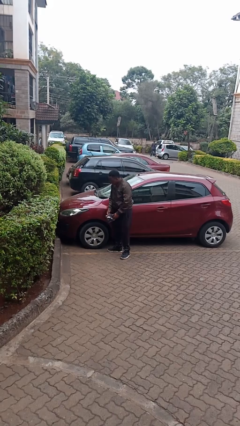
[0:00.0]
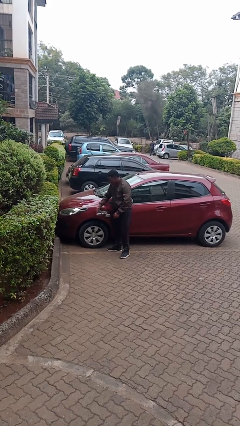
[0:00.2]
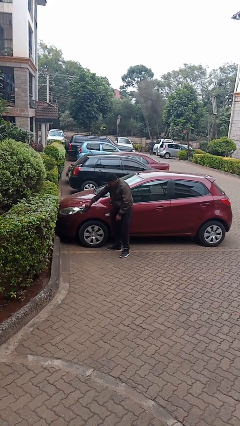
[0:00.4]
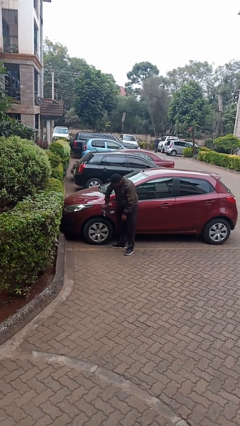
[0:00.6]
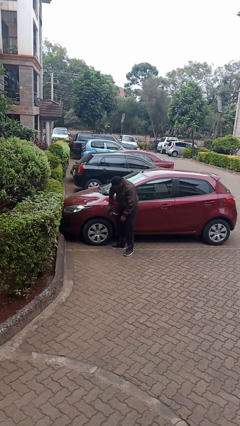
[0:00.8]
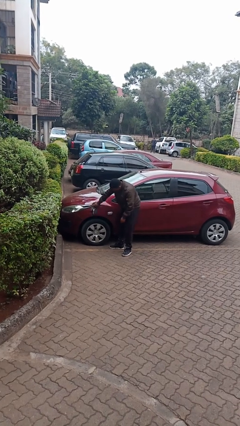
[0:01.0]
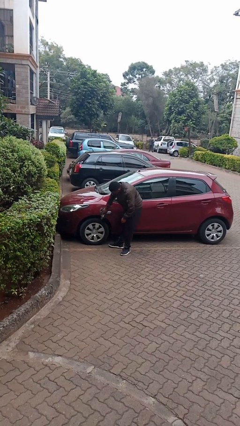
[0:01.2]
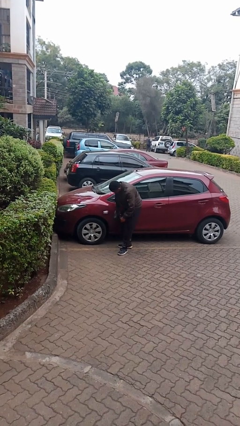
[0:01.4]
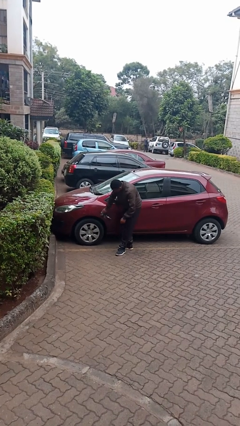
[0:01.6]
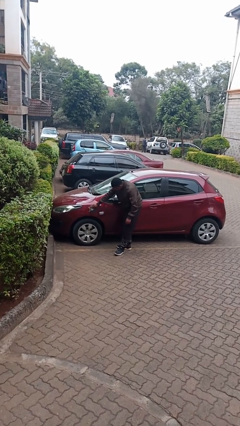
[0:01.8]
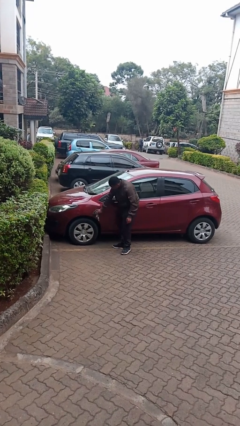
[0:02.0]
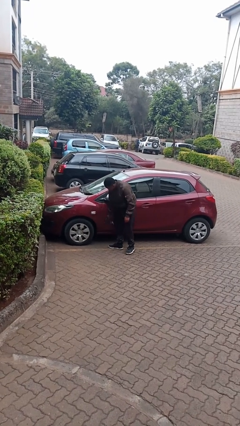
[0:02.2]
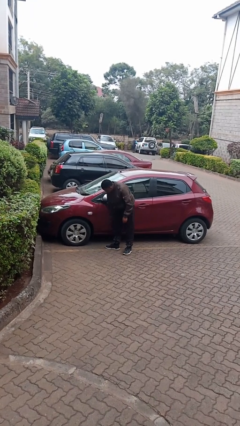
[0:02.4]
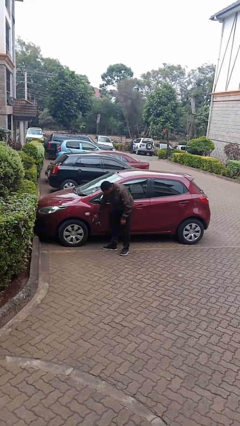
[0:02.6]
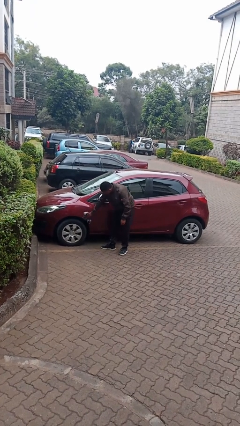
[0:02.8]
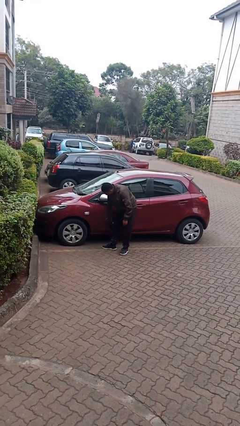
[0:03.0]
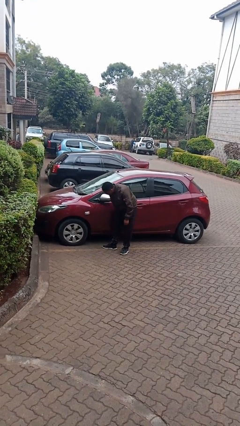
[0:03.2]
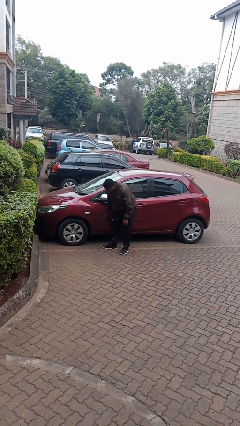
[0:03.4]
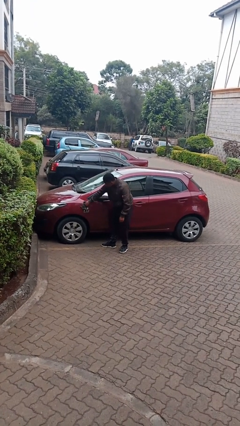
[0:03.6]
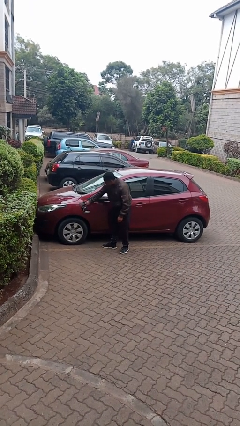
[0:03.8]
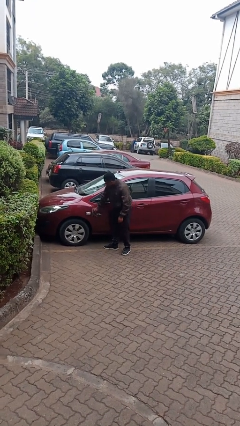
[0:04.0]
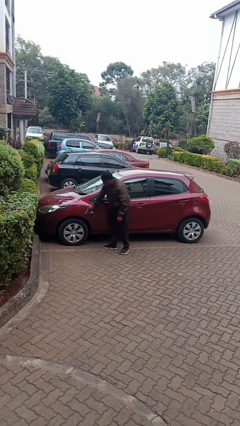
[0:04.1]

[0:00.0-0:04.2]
person polishes car with rag

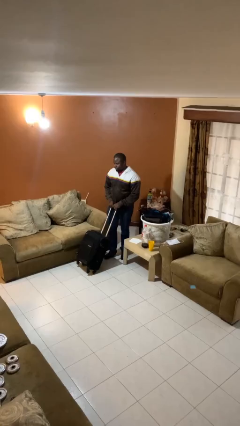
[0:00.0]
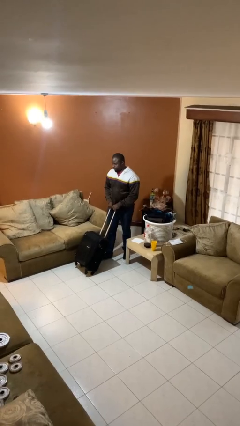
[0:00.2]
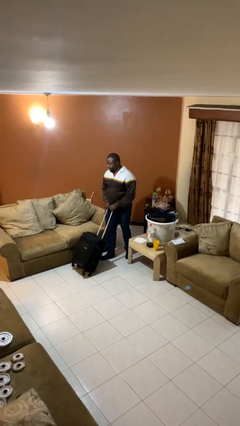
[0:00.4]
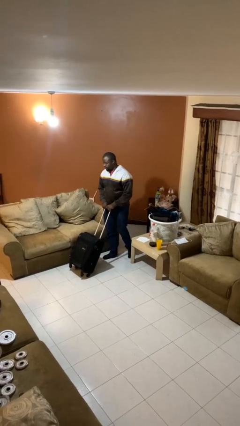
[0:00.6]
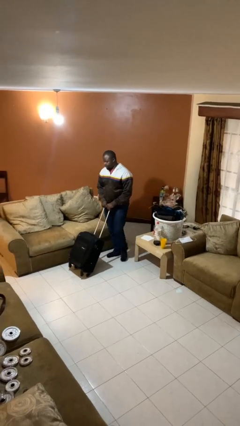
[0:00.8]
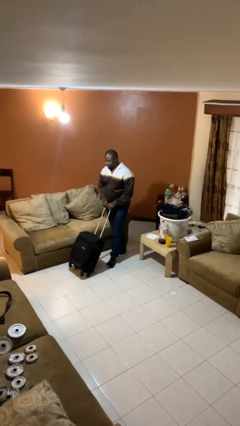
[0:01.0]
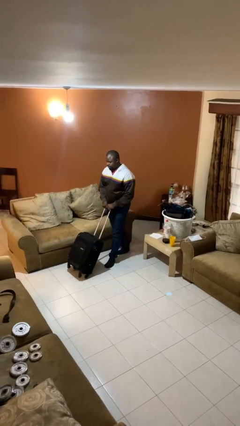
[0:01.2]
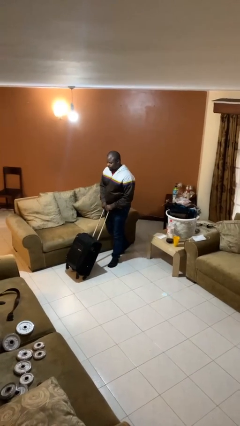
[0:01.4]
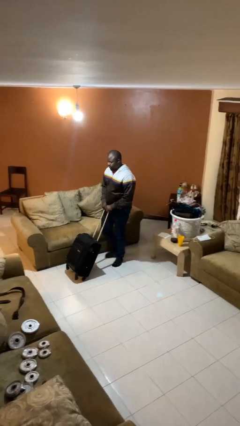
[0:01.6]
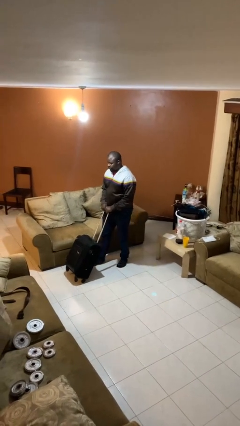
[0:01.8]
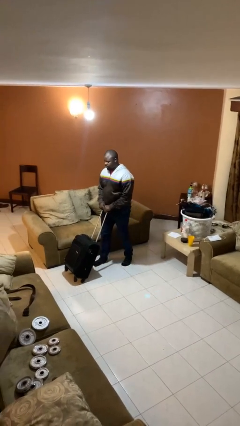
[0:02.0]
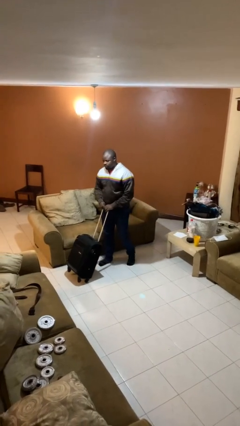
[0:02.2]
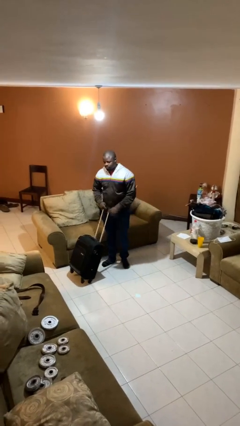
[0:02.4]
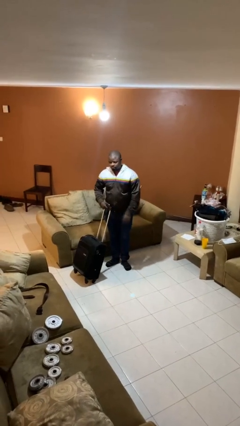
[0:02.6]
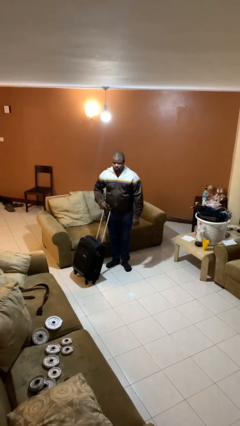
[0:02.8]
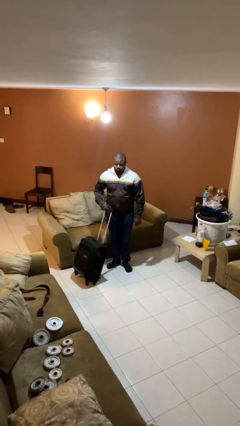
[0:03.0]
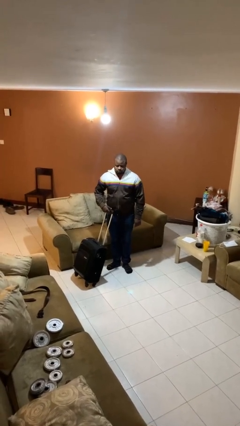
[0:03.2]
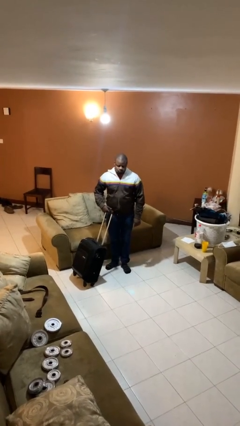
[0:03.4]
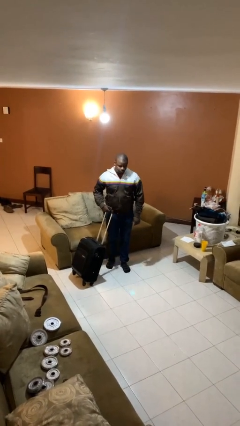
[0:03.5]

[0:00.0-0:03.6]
person pushes wheeled cart

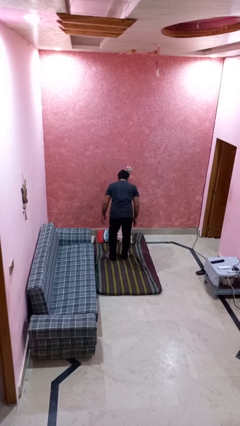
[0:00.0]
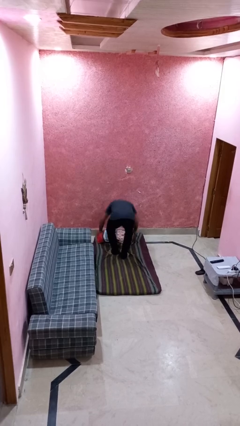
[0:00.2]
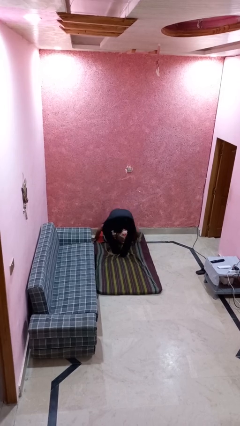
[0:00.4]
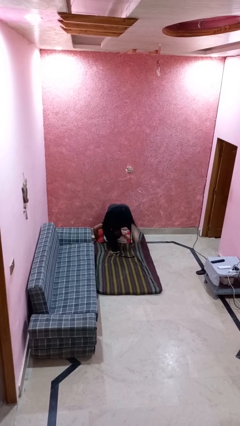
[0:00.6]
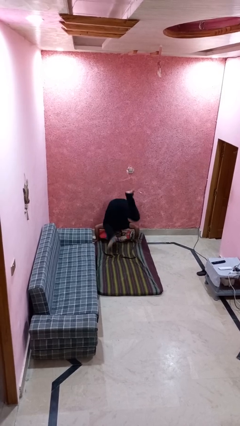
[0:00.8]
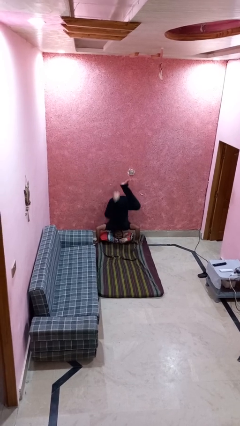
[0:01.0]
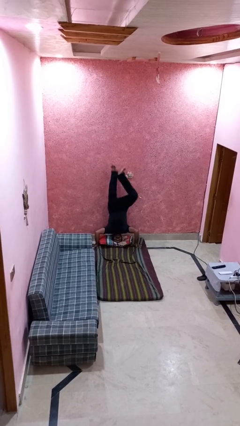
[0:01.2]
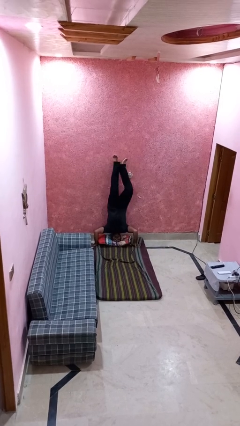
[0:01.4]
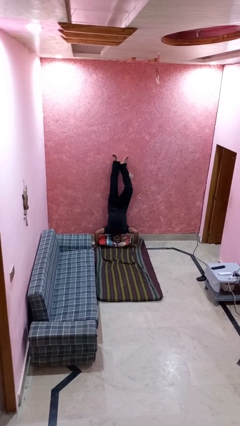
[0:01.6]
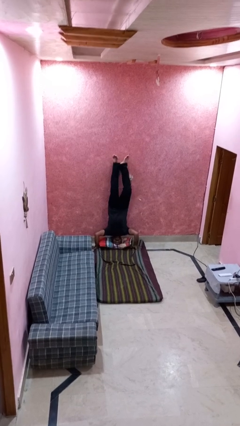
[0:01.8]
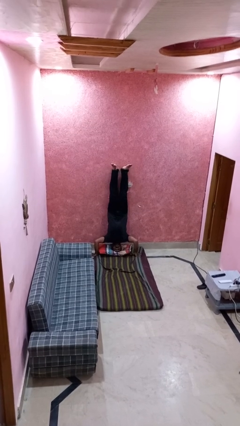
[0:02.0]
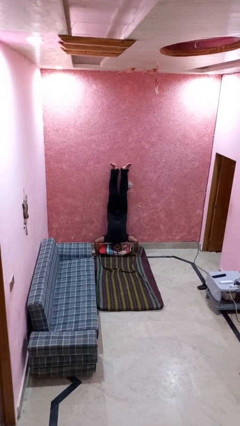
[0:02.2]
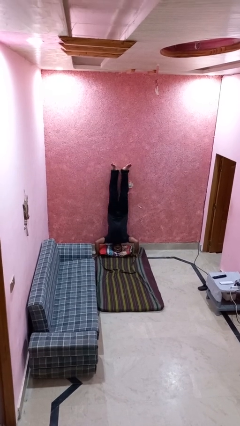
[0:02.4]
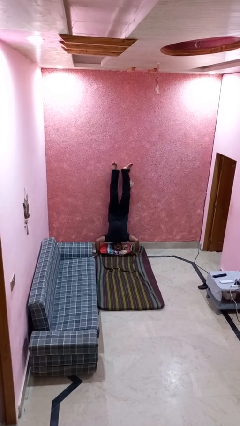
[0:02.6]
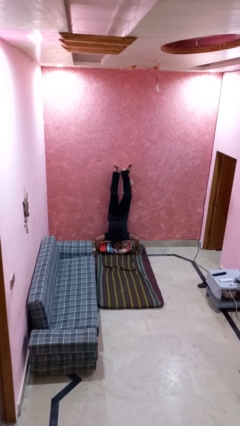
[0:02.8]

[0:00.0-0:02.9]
person handstand

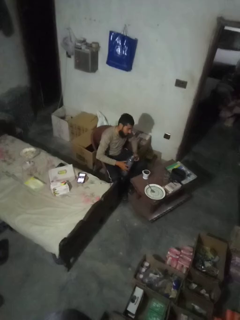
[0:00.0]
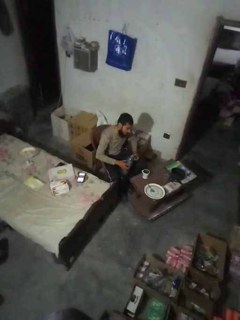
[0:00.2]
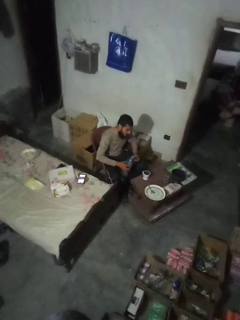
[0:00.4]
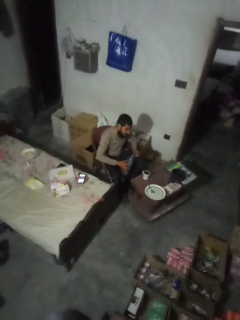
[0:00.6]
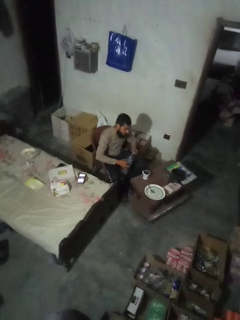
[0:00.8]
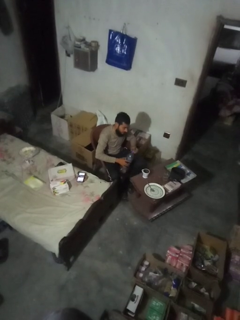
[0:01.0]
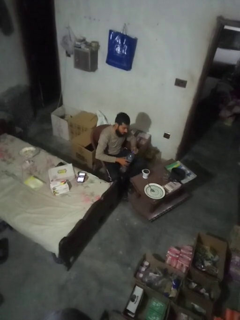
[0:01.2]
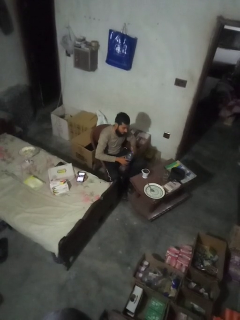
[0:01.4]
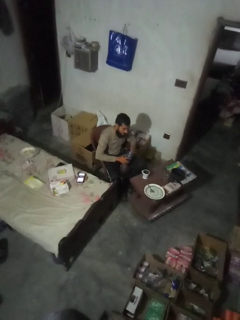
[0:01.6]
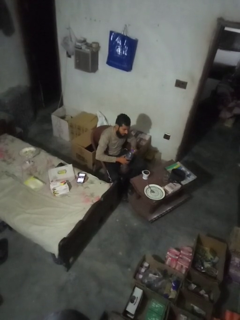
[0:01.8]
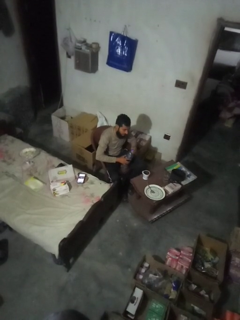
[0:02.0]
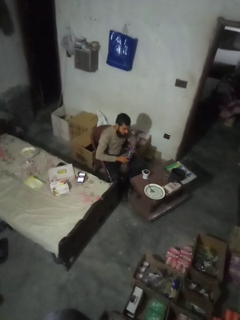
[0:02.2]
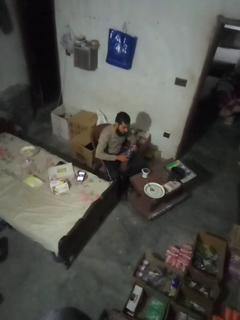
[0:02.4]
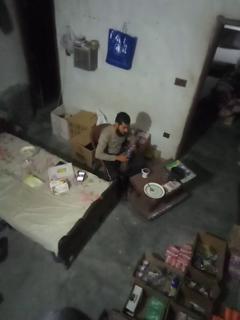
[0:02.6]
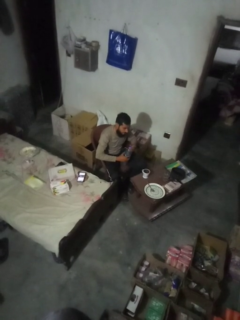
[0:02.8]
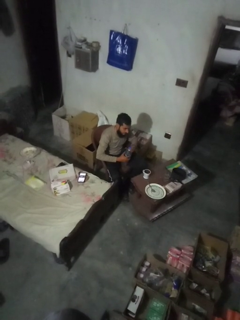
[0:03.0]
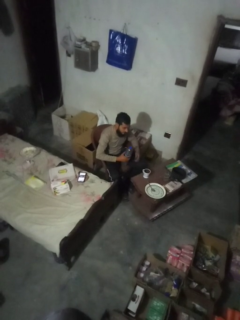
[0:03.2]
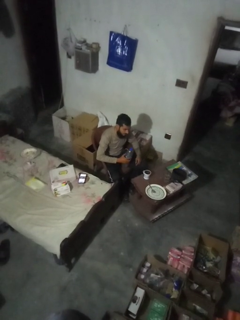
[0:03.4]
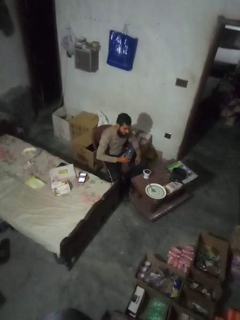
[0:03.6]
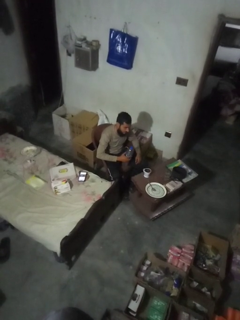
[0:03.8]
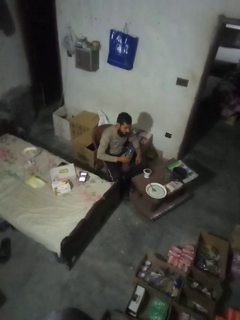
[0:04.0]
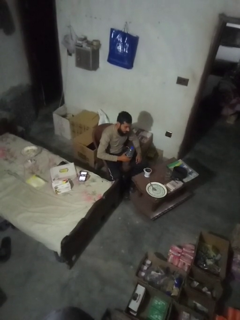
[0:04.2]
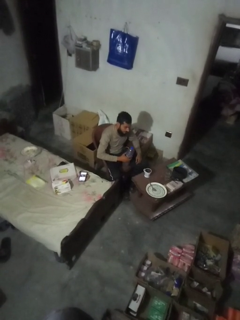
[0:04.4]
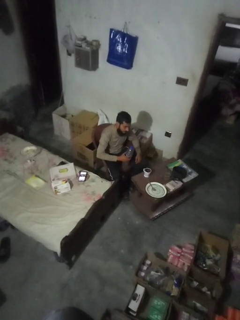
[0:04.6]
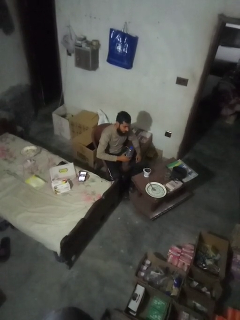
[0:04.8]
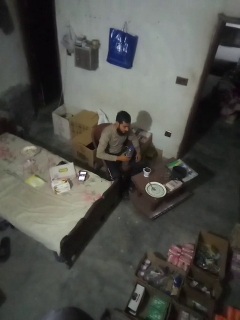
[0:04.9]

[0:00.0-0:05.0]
person screws lid to bottle

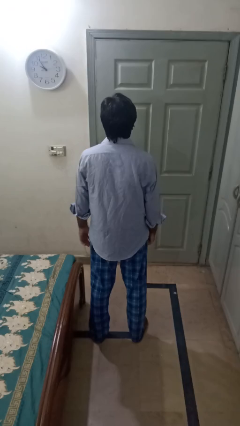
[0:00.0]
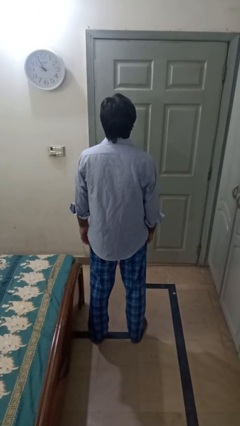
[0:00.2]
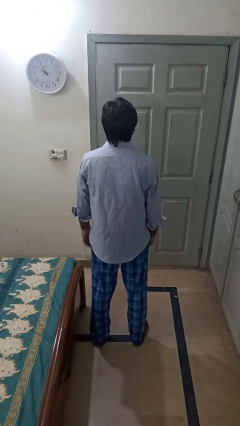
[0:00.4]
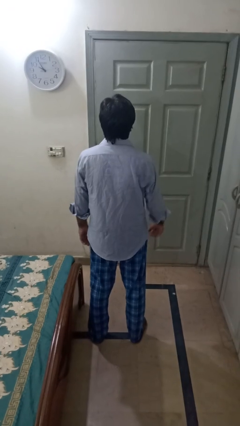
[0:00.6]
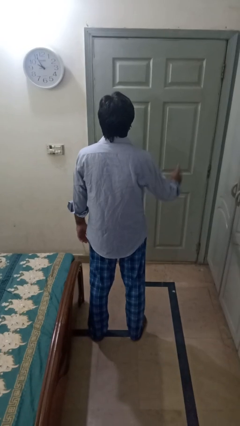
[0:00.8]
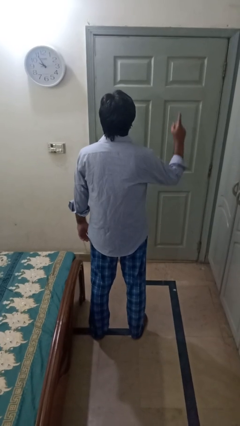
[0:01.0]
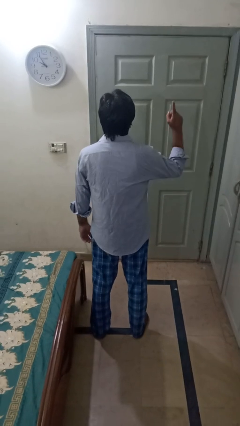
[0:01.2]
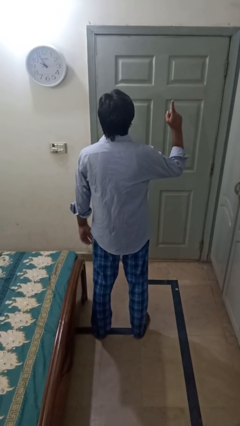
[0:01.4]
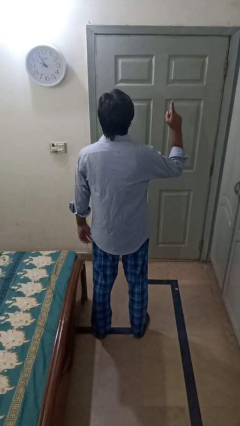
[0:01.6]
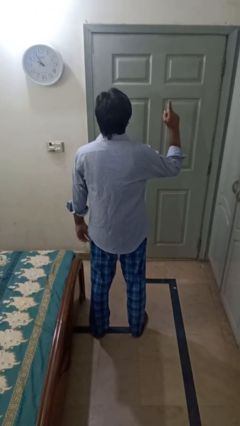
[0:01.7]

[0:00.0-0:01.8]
person gestures number one

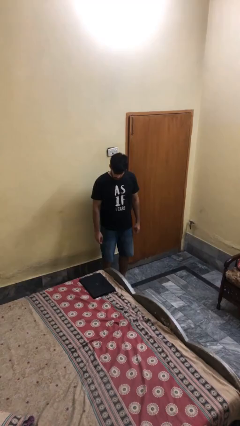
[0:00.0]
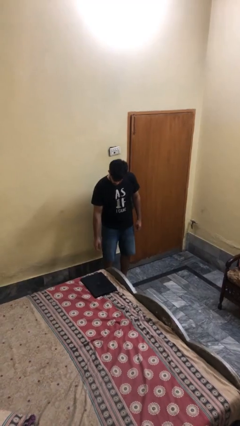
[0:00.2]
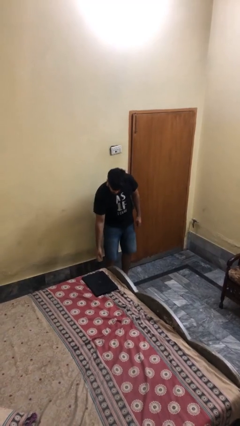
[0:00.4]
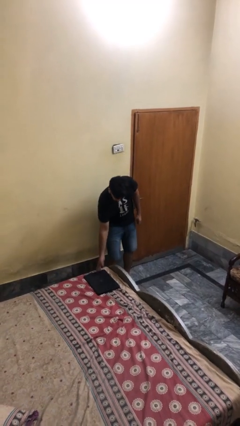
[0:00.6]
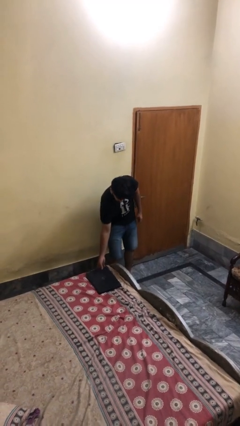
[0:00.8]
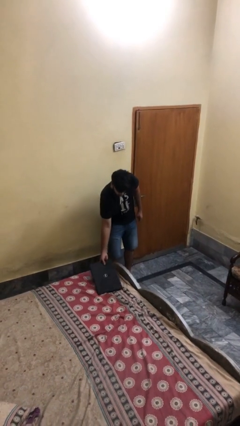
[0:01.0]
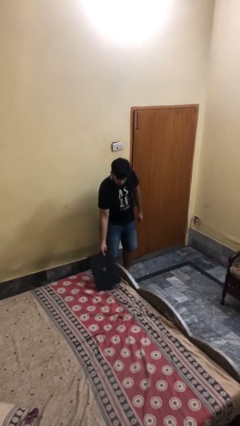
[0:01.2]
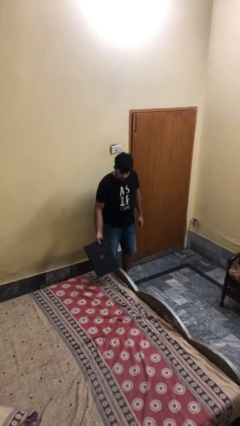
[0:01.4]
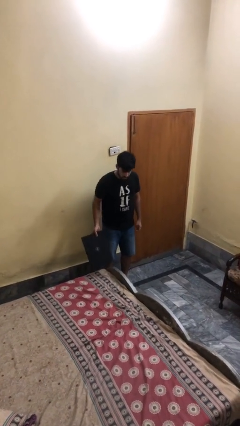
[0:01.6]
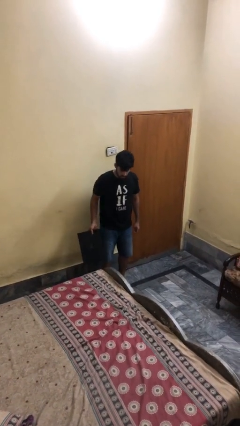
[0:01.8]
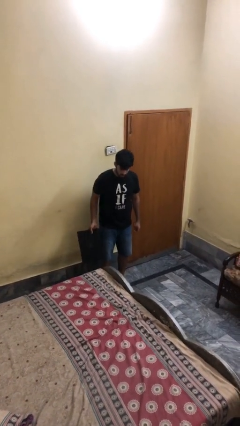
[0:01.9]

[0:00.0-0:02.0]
person picks up object from bed
